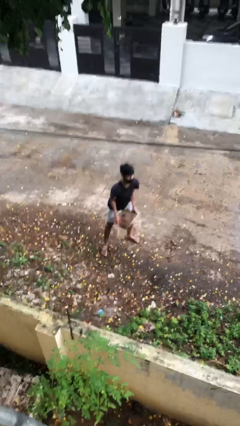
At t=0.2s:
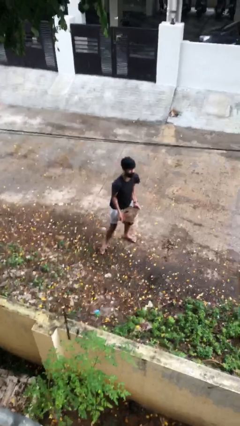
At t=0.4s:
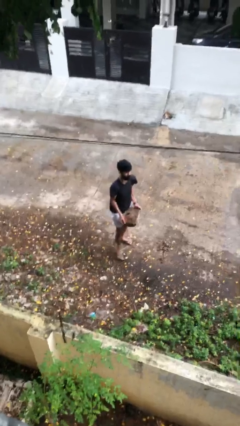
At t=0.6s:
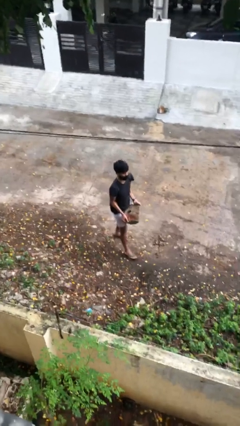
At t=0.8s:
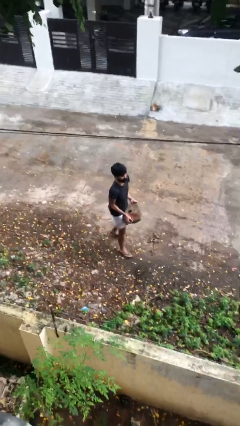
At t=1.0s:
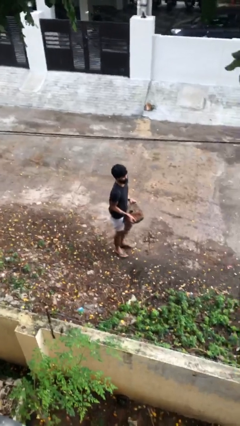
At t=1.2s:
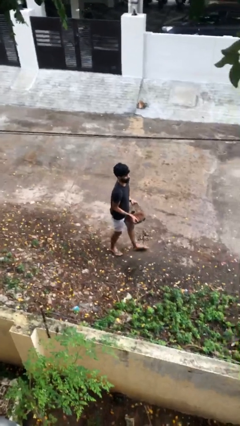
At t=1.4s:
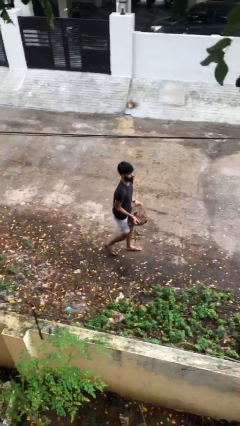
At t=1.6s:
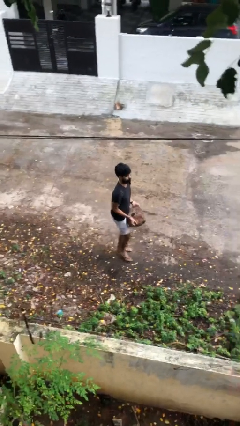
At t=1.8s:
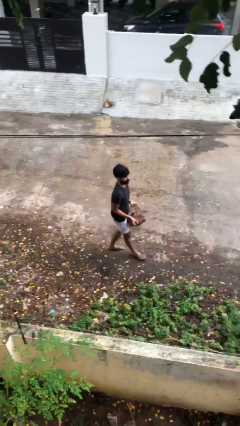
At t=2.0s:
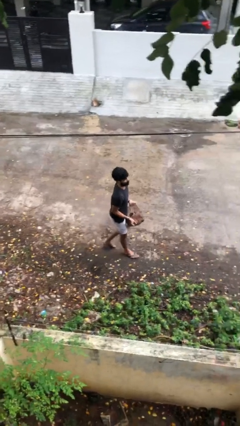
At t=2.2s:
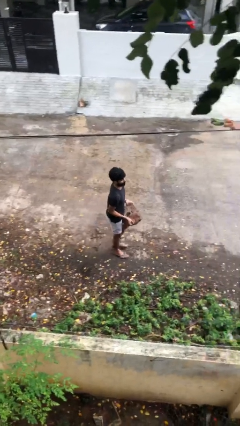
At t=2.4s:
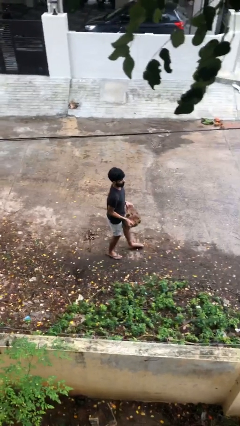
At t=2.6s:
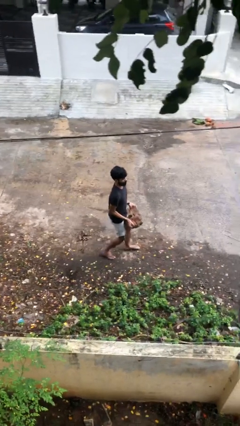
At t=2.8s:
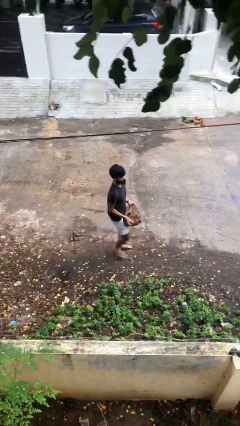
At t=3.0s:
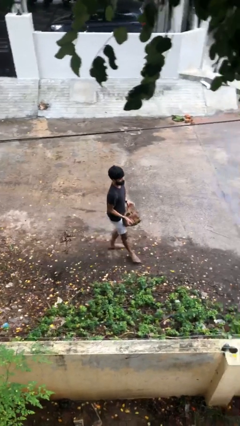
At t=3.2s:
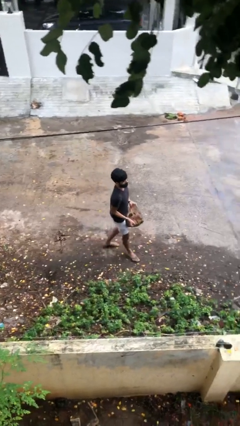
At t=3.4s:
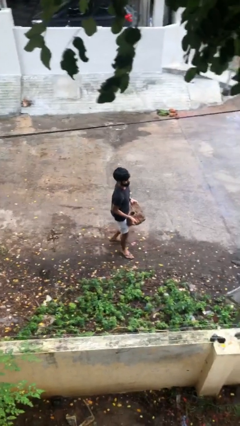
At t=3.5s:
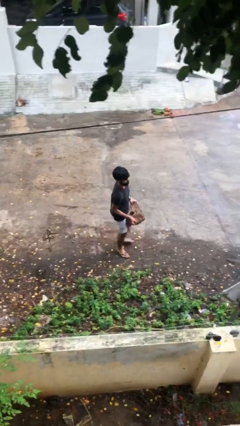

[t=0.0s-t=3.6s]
person carries heavy object

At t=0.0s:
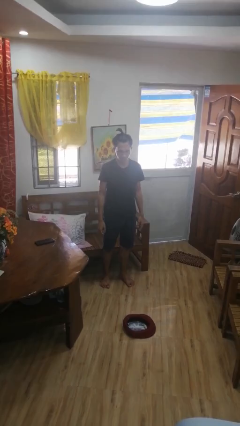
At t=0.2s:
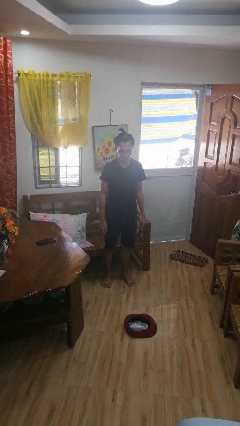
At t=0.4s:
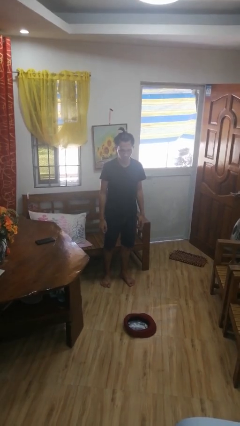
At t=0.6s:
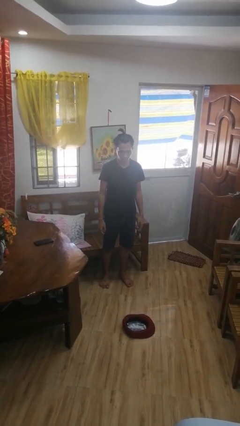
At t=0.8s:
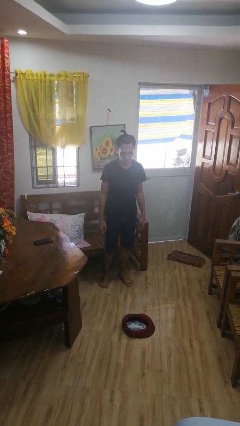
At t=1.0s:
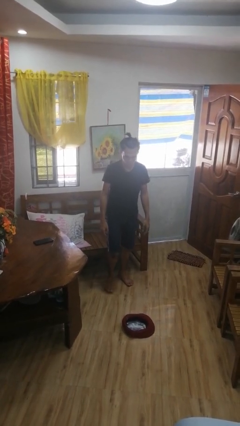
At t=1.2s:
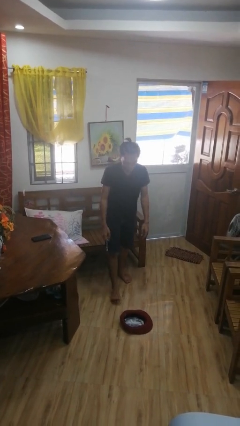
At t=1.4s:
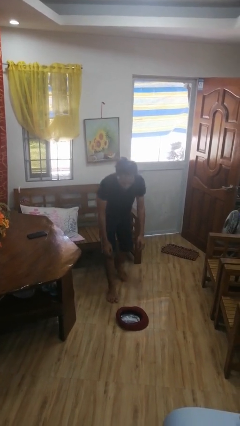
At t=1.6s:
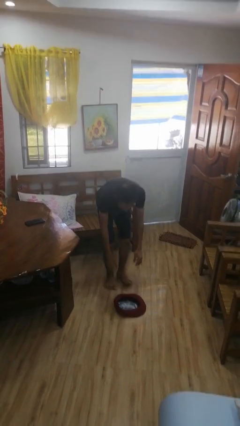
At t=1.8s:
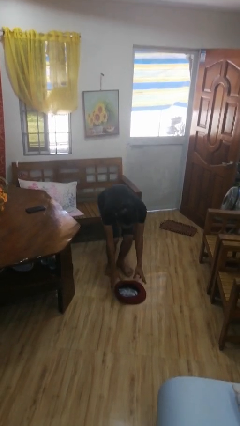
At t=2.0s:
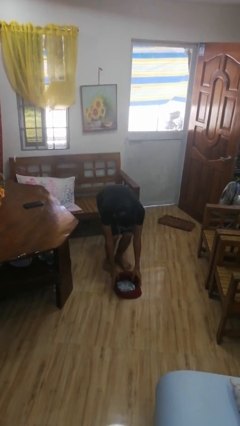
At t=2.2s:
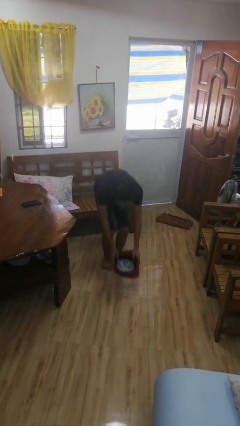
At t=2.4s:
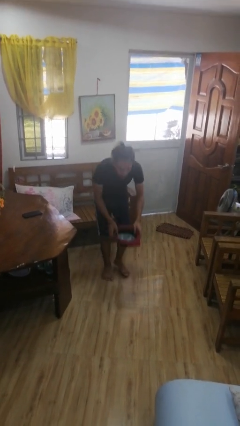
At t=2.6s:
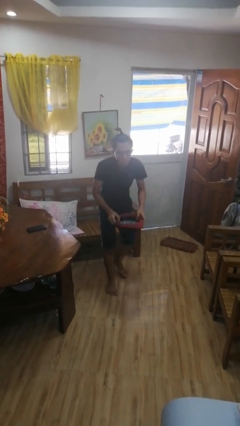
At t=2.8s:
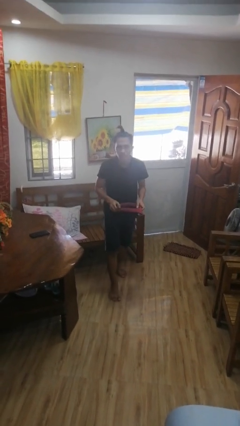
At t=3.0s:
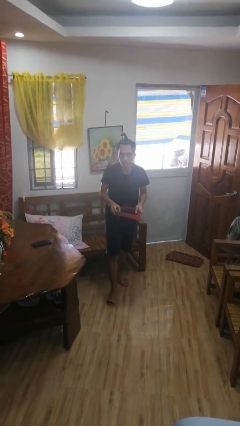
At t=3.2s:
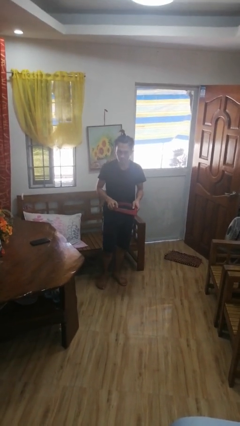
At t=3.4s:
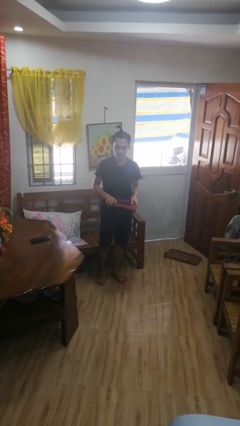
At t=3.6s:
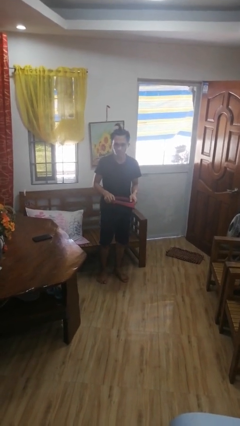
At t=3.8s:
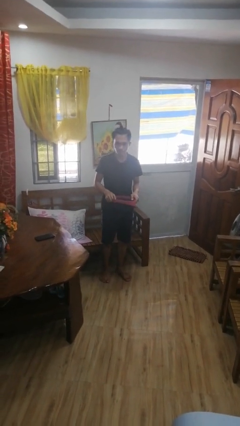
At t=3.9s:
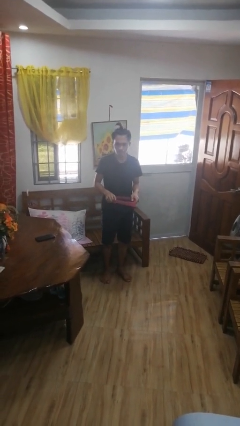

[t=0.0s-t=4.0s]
person picks up object from floor

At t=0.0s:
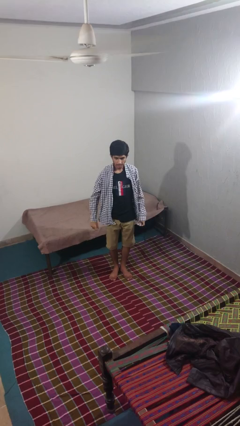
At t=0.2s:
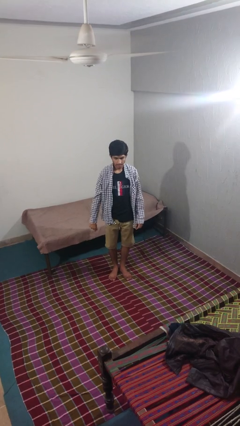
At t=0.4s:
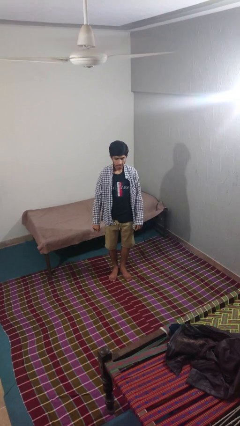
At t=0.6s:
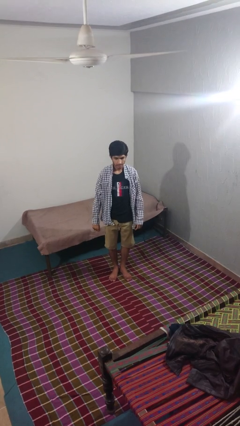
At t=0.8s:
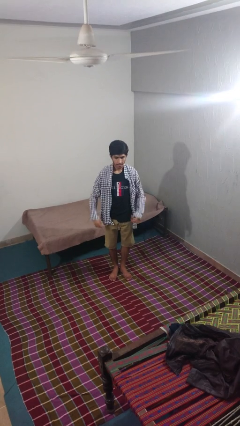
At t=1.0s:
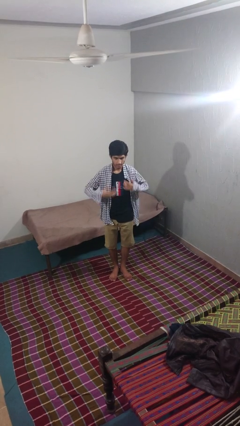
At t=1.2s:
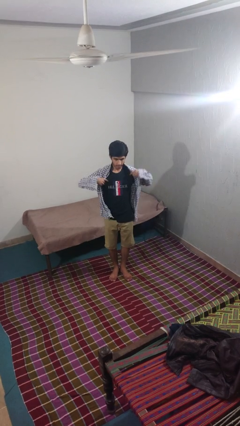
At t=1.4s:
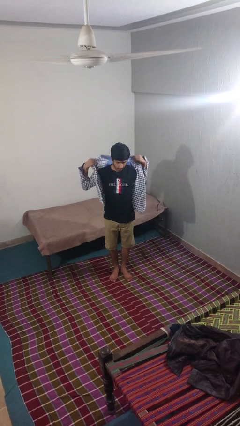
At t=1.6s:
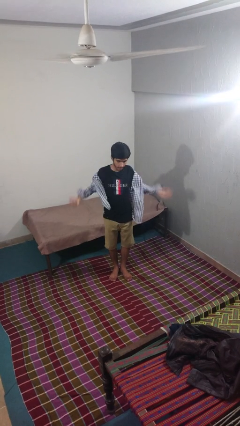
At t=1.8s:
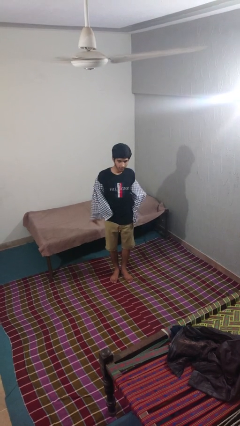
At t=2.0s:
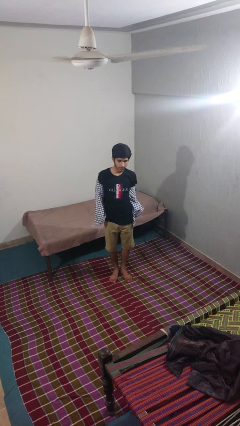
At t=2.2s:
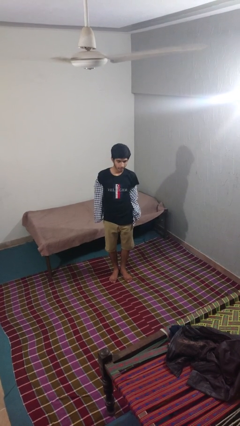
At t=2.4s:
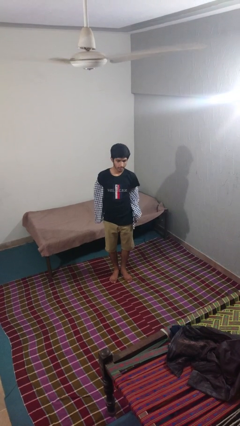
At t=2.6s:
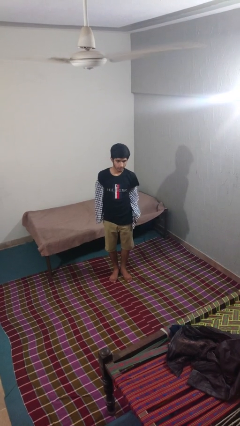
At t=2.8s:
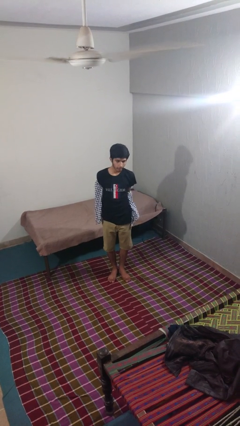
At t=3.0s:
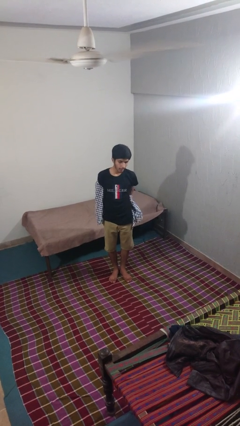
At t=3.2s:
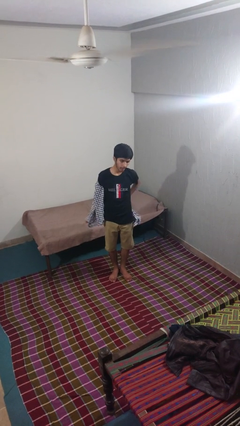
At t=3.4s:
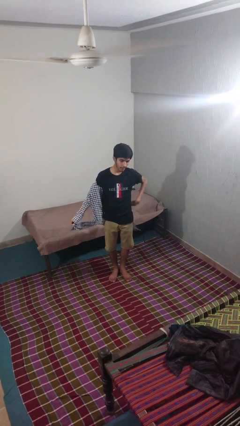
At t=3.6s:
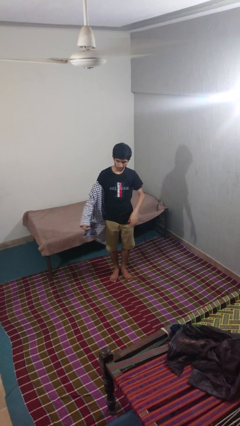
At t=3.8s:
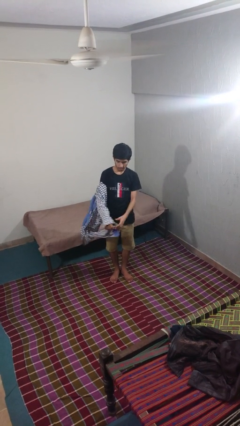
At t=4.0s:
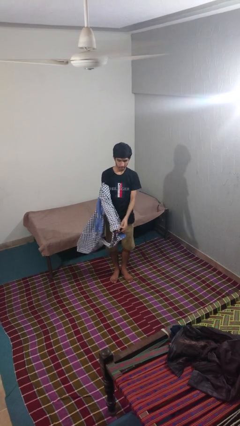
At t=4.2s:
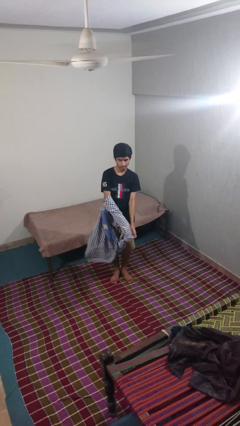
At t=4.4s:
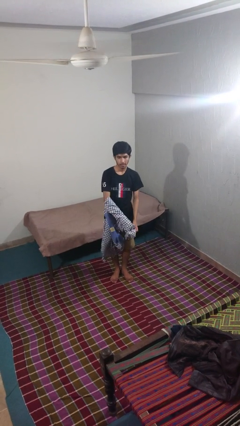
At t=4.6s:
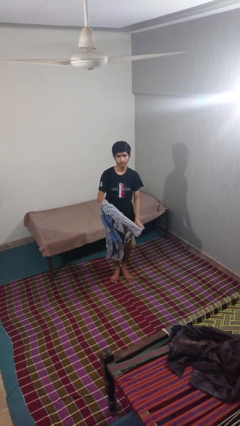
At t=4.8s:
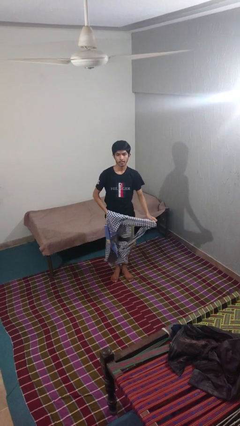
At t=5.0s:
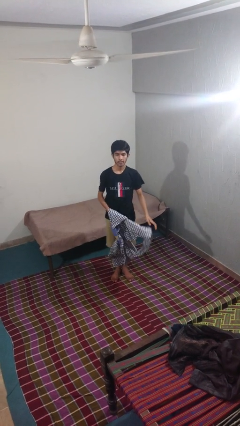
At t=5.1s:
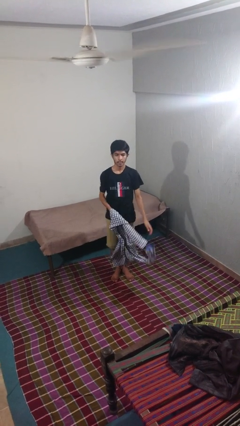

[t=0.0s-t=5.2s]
person takes off shirt

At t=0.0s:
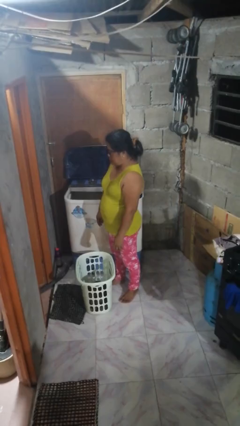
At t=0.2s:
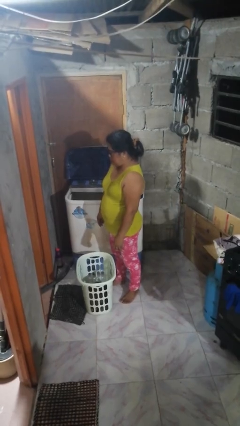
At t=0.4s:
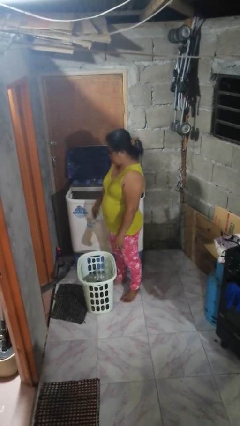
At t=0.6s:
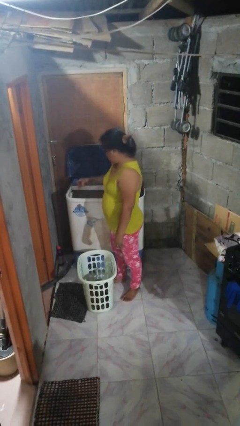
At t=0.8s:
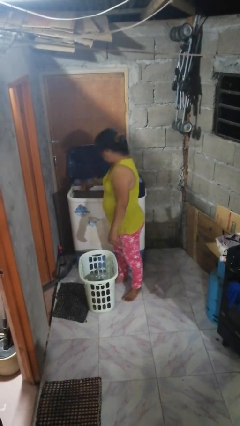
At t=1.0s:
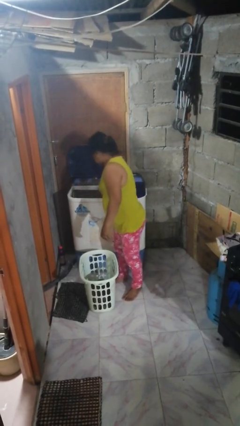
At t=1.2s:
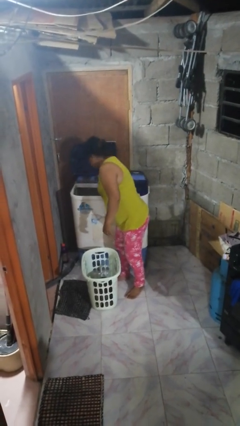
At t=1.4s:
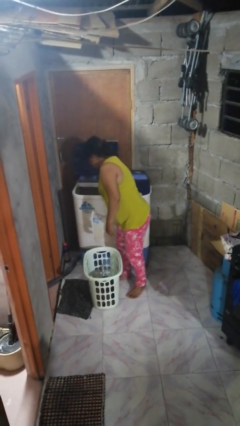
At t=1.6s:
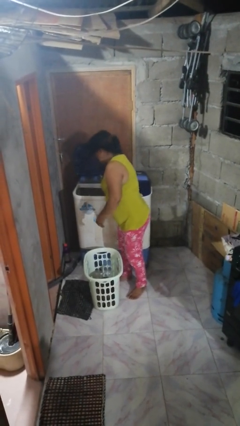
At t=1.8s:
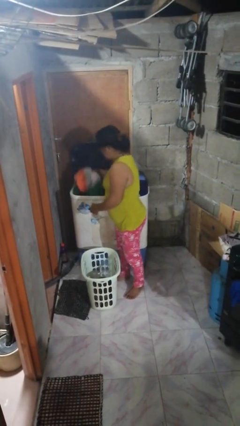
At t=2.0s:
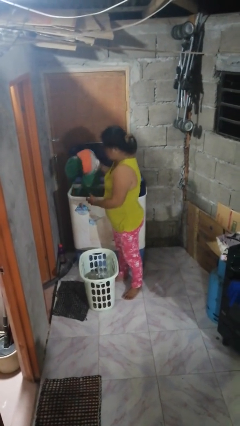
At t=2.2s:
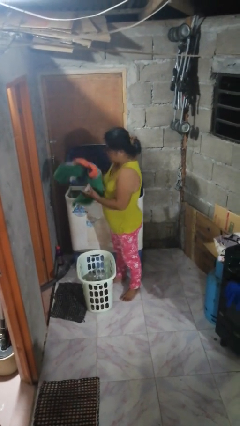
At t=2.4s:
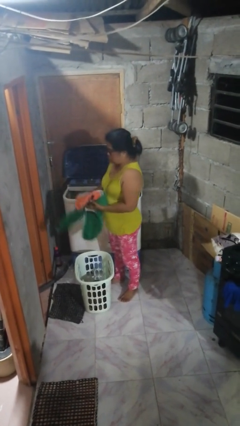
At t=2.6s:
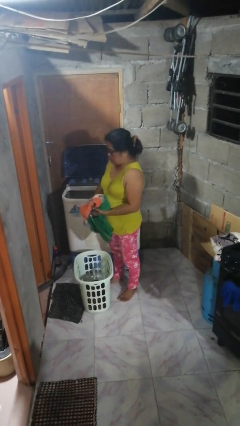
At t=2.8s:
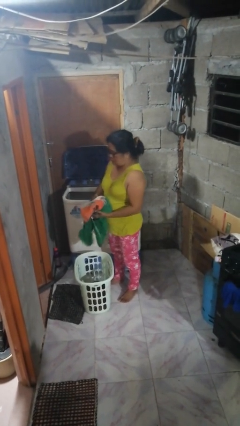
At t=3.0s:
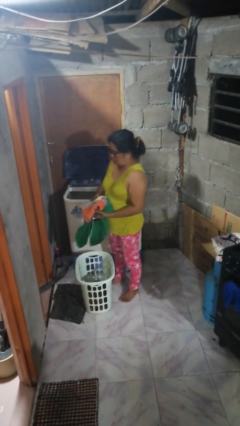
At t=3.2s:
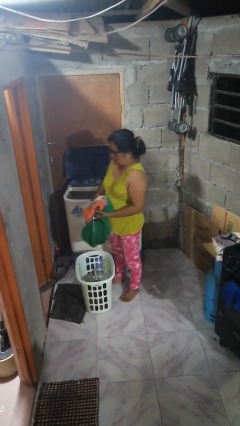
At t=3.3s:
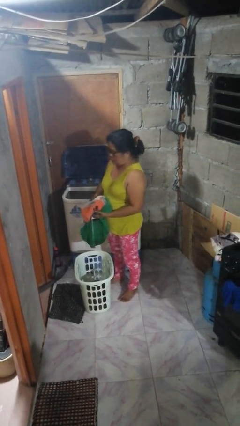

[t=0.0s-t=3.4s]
person unloads clotheswasher

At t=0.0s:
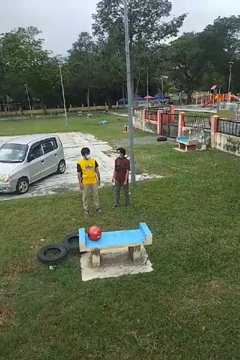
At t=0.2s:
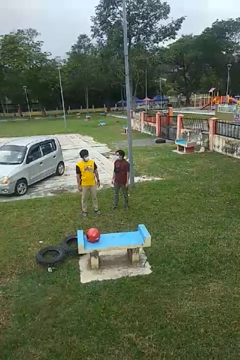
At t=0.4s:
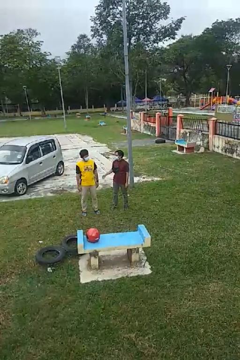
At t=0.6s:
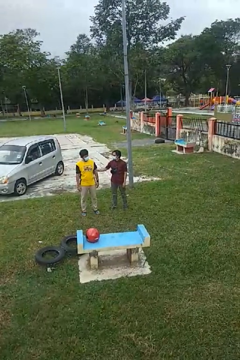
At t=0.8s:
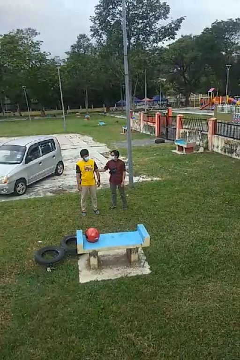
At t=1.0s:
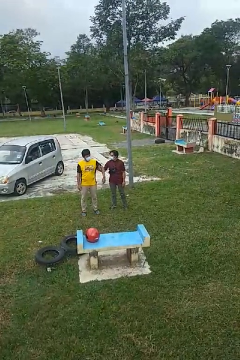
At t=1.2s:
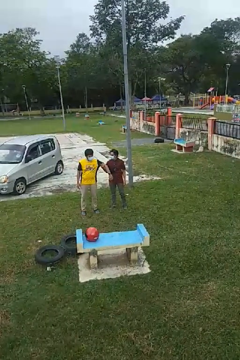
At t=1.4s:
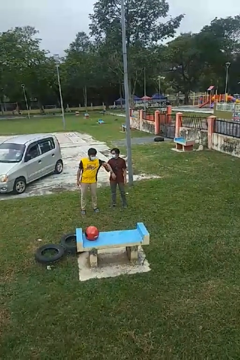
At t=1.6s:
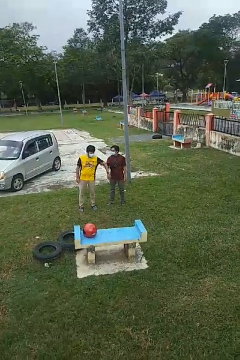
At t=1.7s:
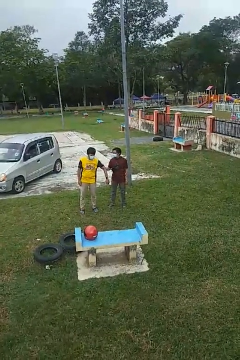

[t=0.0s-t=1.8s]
person grabs person by bicep

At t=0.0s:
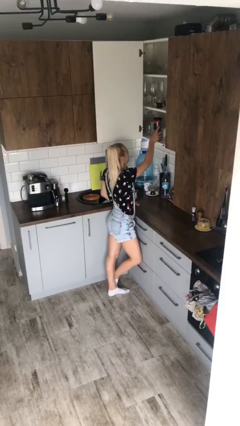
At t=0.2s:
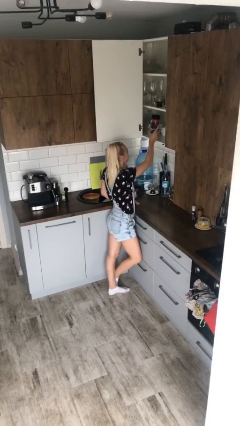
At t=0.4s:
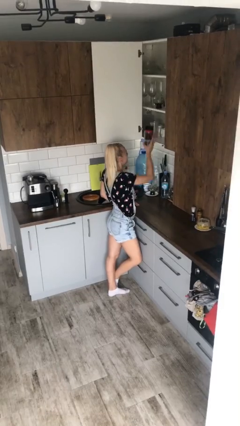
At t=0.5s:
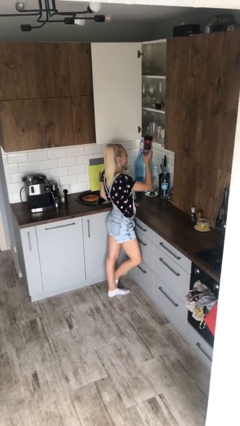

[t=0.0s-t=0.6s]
person picks up object from shelf
